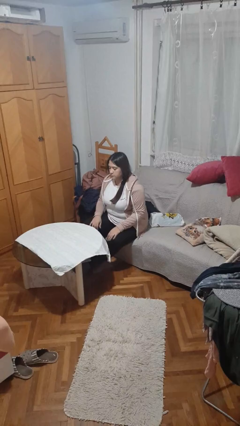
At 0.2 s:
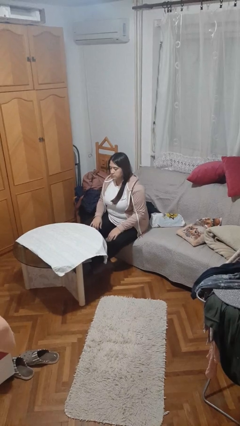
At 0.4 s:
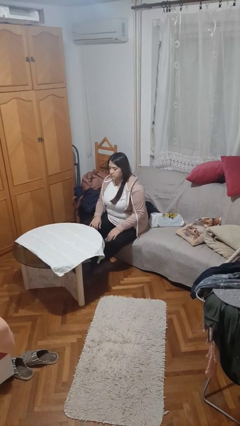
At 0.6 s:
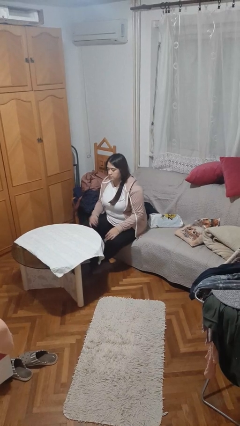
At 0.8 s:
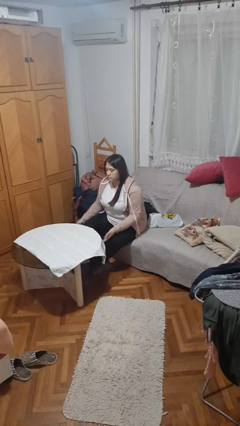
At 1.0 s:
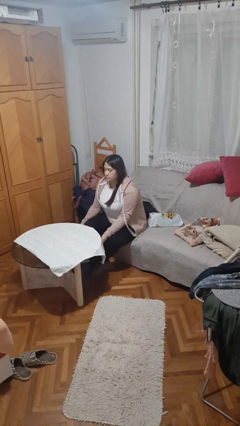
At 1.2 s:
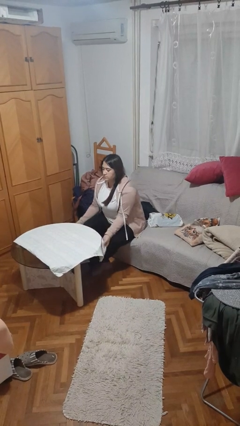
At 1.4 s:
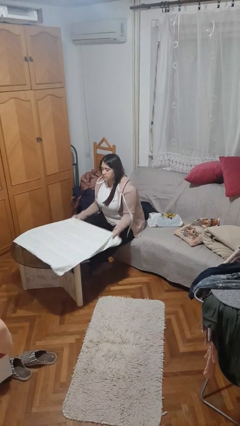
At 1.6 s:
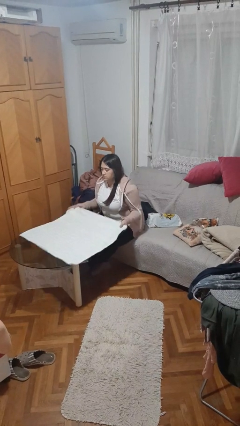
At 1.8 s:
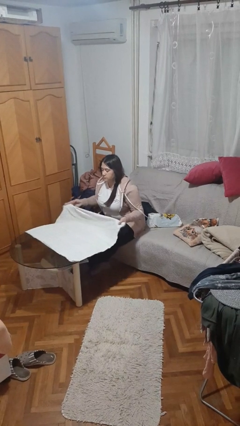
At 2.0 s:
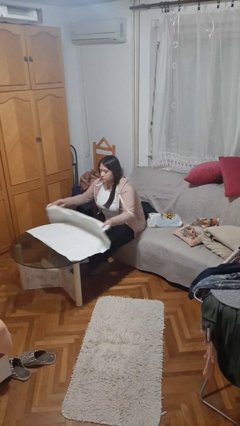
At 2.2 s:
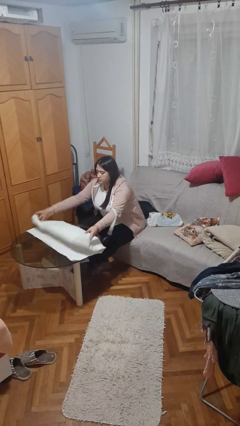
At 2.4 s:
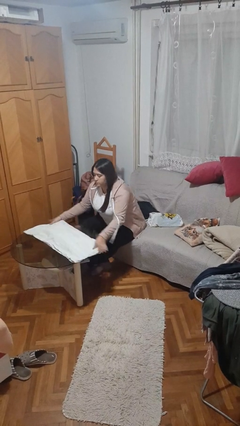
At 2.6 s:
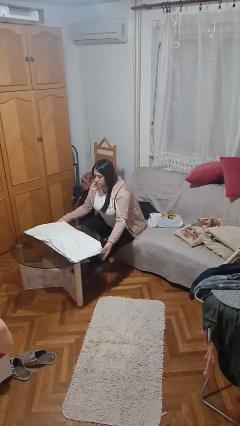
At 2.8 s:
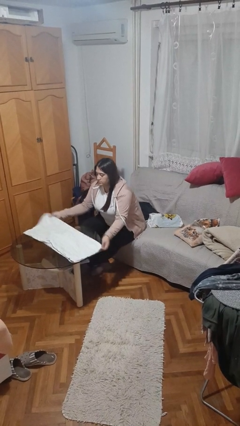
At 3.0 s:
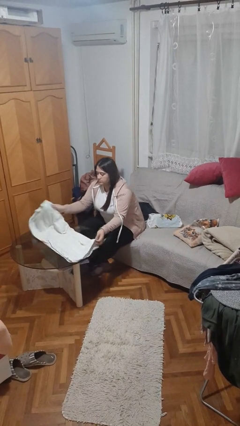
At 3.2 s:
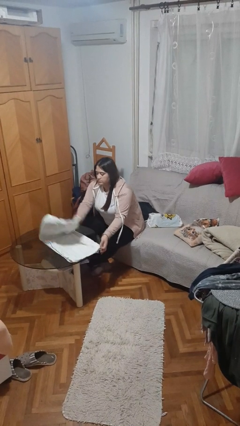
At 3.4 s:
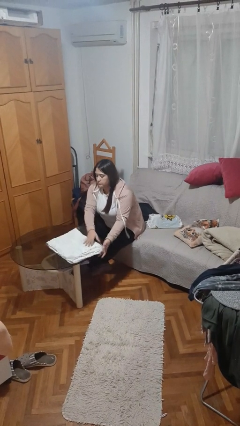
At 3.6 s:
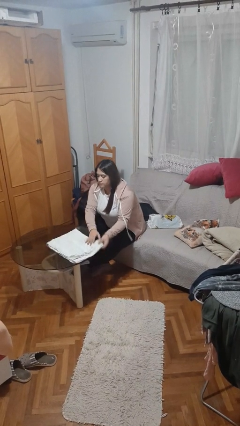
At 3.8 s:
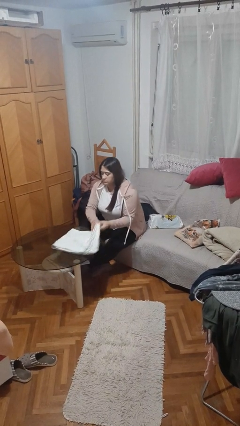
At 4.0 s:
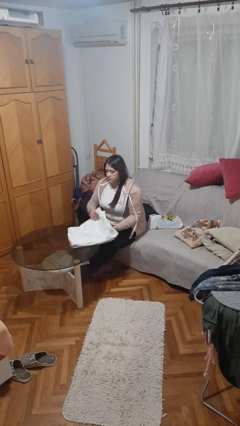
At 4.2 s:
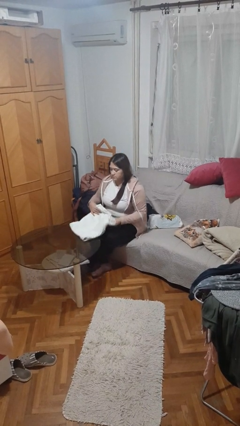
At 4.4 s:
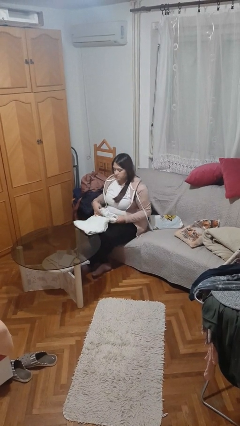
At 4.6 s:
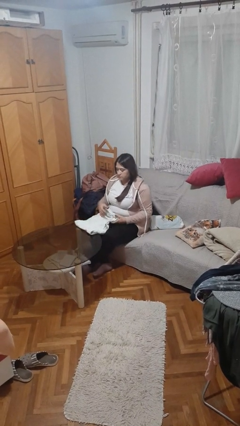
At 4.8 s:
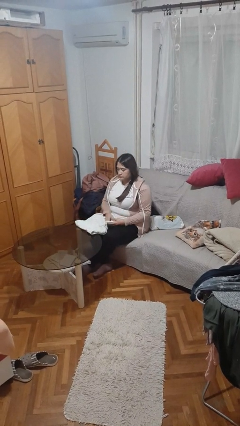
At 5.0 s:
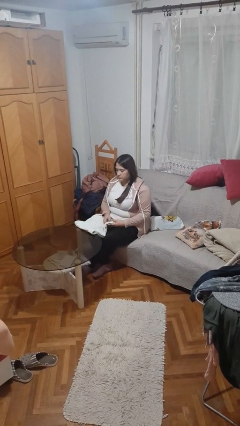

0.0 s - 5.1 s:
person folds tablecloth

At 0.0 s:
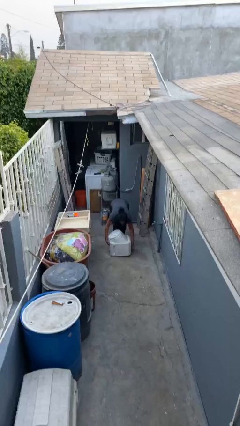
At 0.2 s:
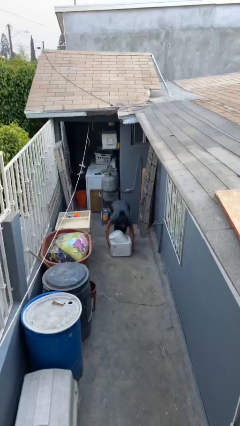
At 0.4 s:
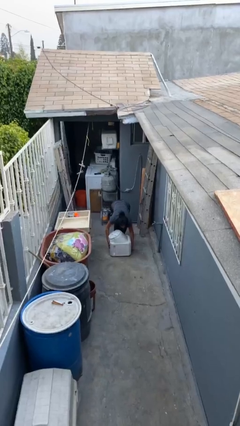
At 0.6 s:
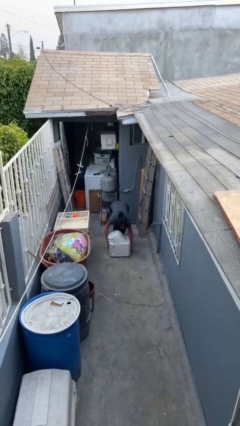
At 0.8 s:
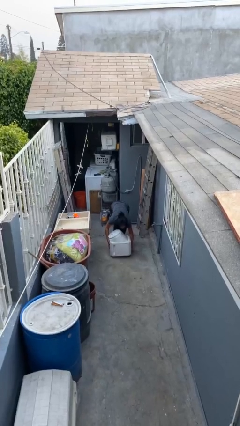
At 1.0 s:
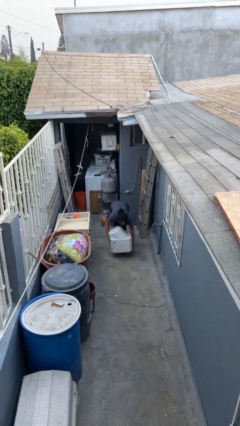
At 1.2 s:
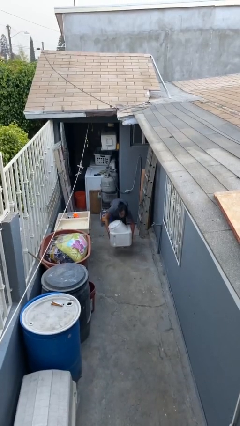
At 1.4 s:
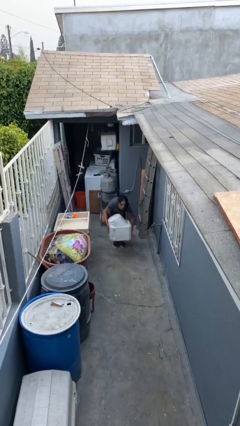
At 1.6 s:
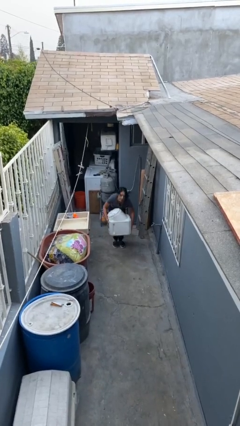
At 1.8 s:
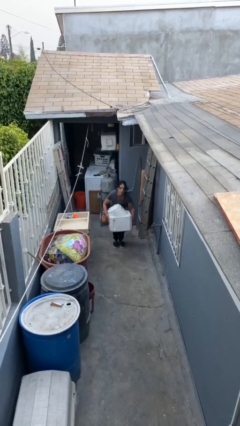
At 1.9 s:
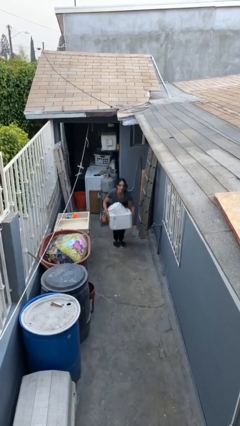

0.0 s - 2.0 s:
person picks up object from floor

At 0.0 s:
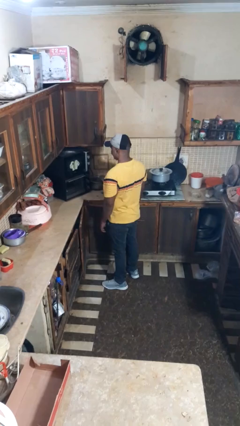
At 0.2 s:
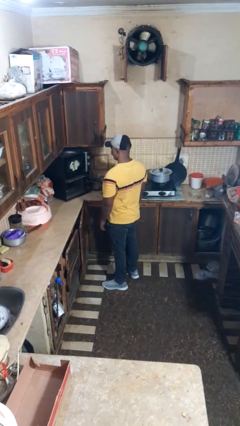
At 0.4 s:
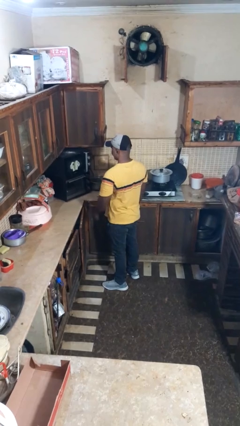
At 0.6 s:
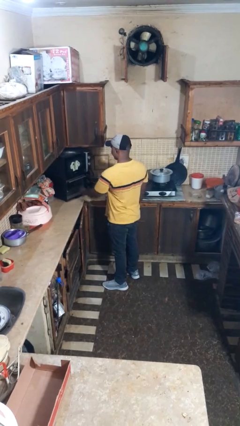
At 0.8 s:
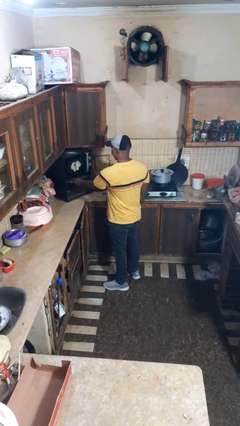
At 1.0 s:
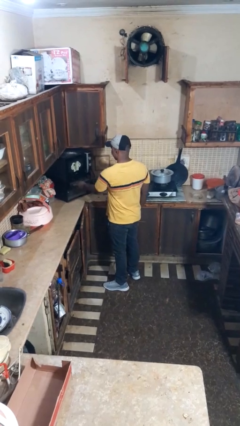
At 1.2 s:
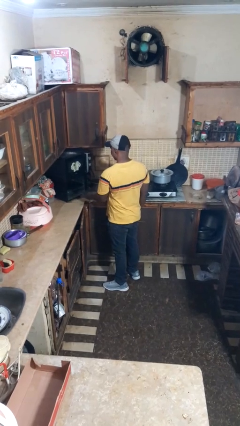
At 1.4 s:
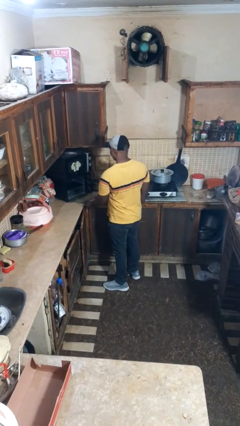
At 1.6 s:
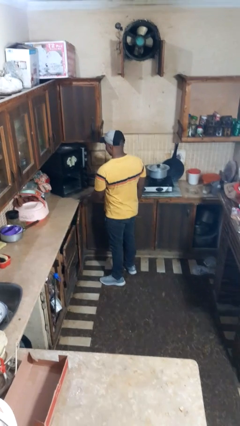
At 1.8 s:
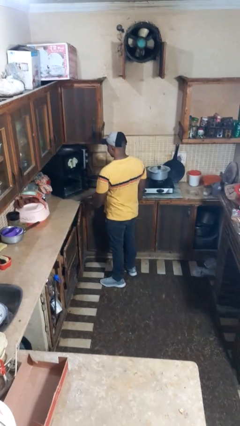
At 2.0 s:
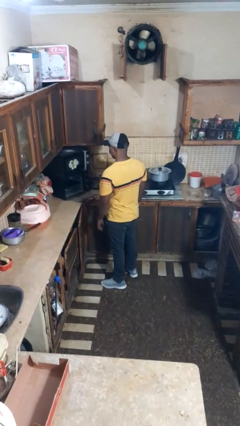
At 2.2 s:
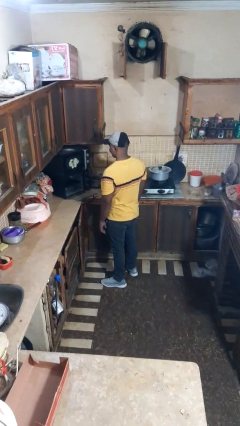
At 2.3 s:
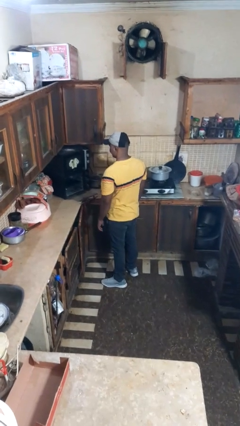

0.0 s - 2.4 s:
person opens oven door

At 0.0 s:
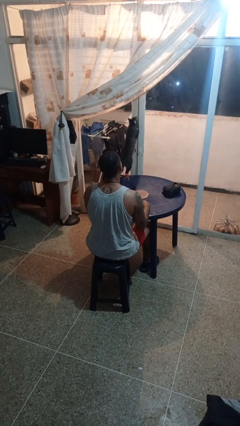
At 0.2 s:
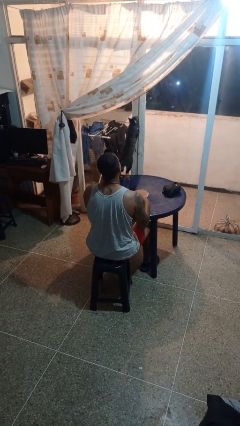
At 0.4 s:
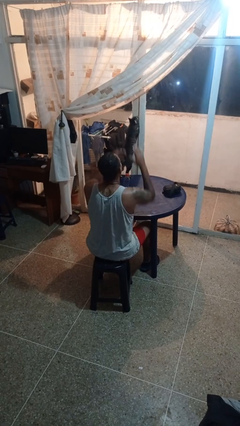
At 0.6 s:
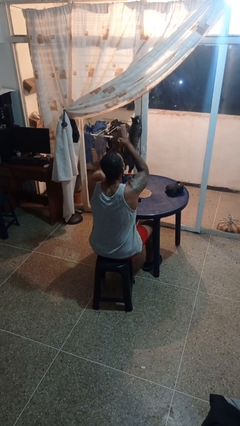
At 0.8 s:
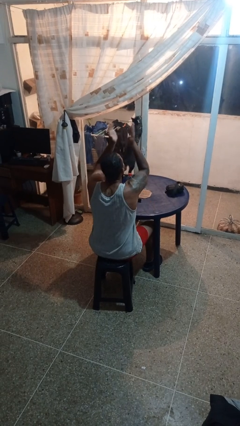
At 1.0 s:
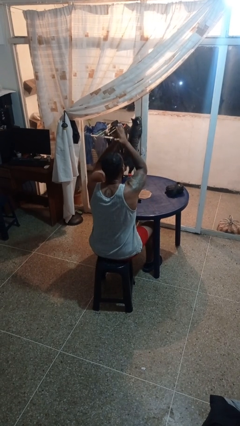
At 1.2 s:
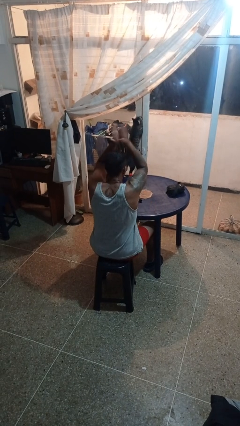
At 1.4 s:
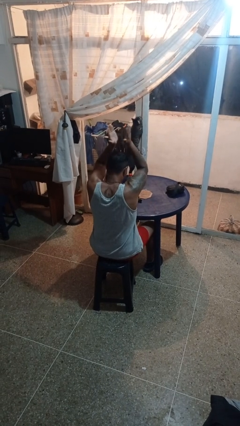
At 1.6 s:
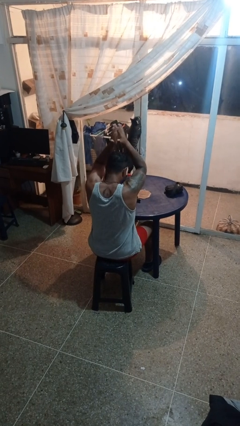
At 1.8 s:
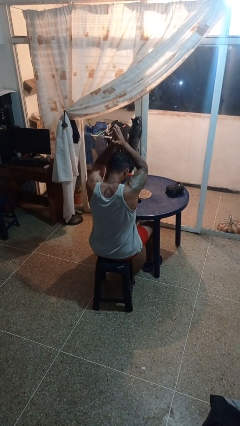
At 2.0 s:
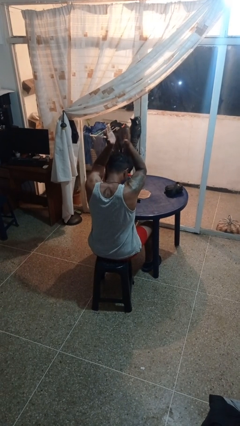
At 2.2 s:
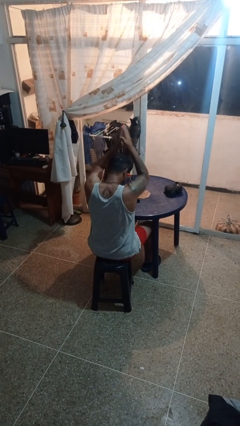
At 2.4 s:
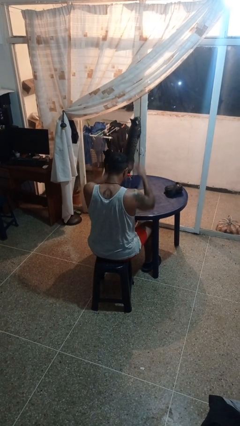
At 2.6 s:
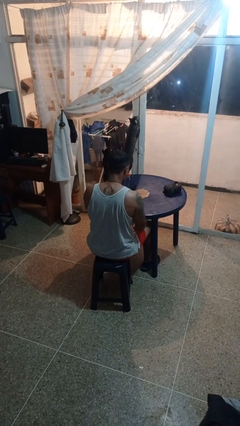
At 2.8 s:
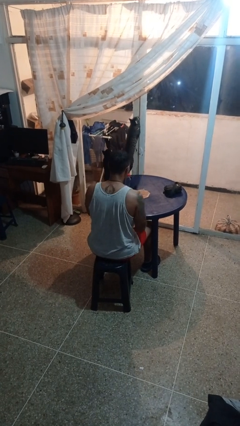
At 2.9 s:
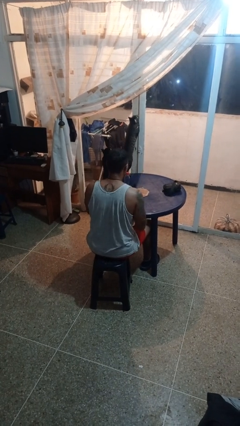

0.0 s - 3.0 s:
person claps hands

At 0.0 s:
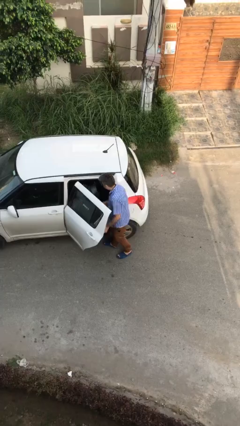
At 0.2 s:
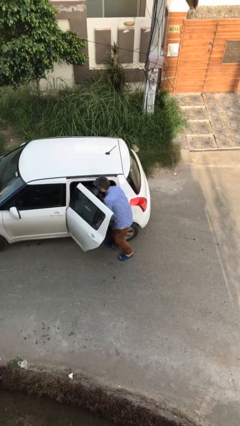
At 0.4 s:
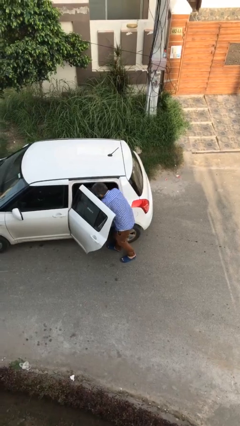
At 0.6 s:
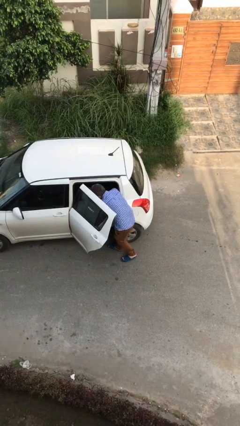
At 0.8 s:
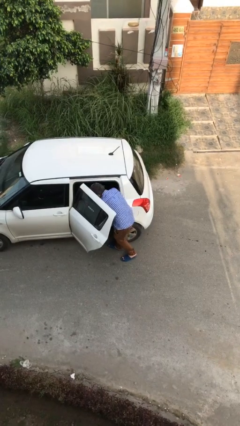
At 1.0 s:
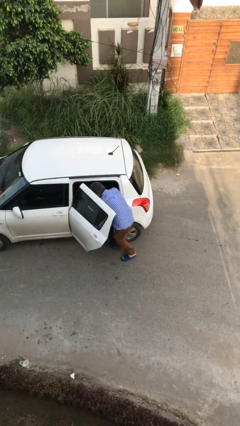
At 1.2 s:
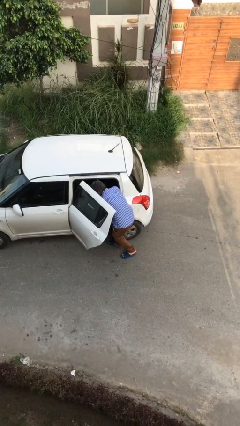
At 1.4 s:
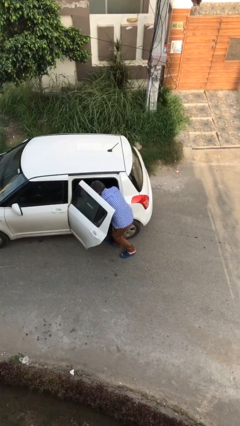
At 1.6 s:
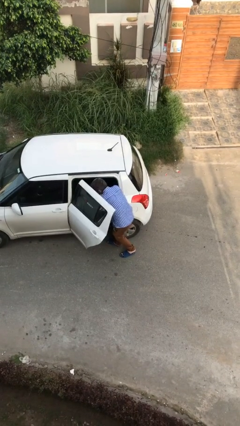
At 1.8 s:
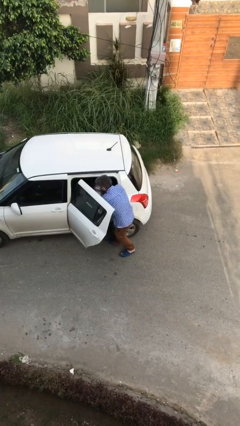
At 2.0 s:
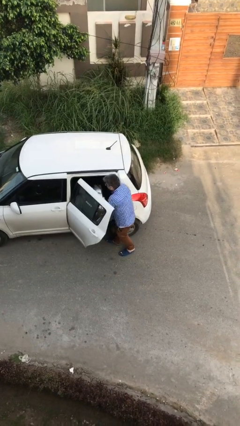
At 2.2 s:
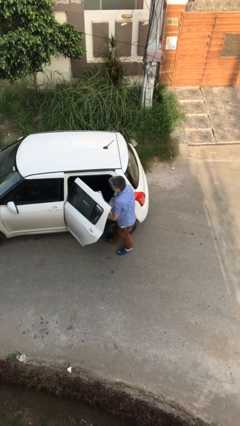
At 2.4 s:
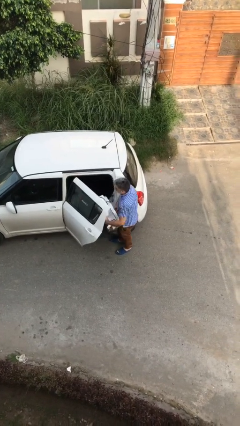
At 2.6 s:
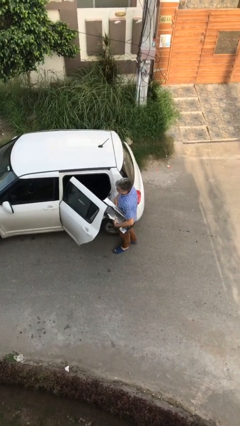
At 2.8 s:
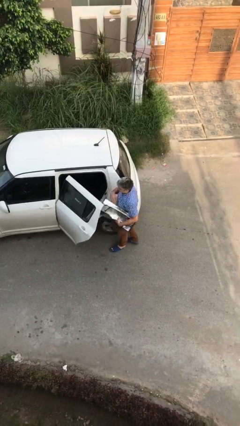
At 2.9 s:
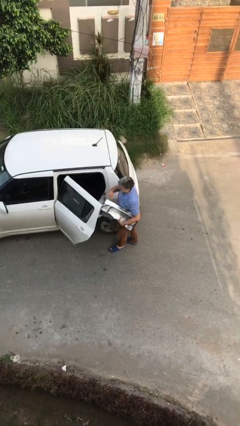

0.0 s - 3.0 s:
person unloads car

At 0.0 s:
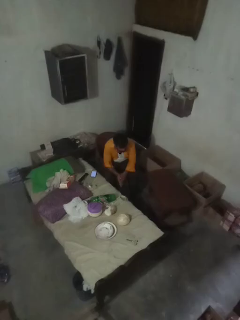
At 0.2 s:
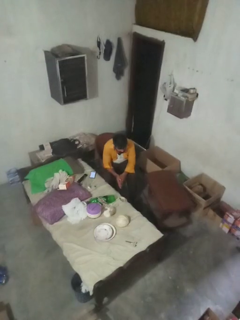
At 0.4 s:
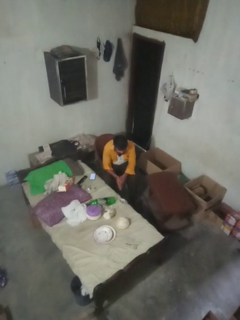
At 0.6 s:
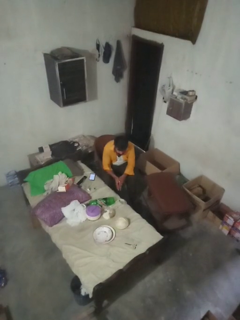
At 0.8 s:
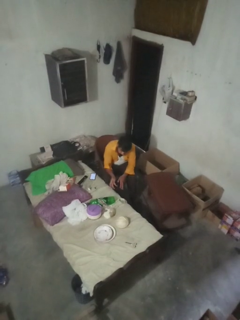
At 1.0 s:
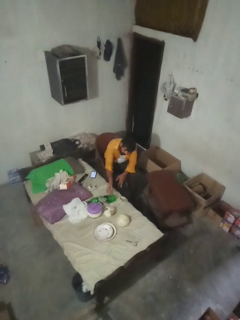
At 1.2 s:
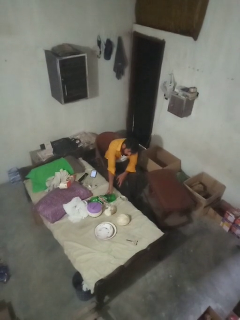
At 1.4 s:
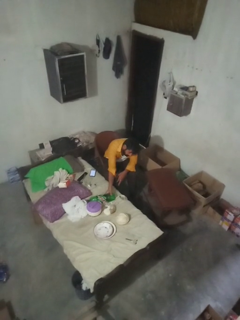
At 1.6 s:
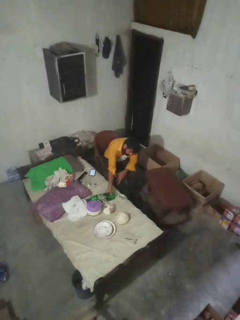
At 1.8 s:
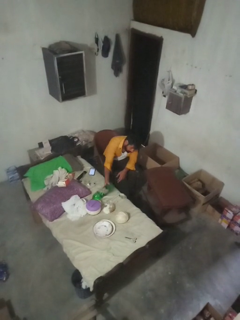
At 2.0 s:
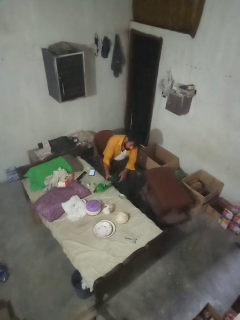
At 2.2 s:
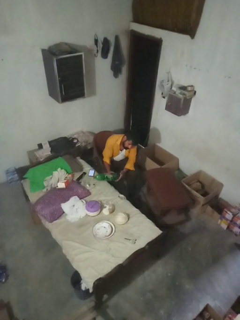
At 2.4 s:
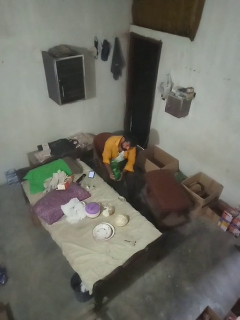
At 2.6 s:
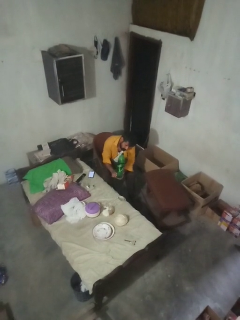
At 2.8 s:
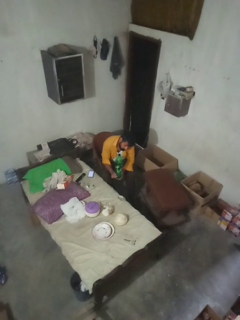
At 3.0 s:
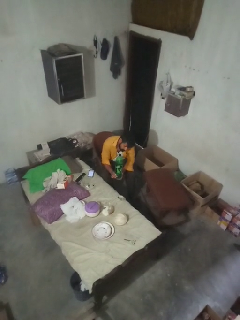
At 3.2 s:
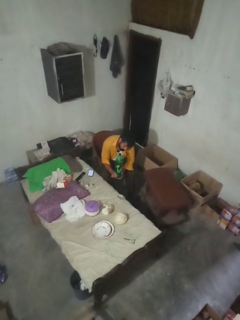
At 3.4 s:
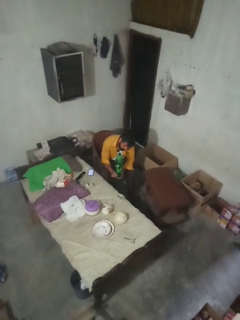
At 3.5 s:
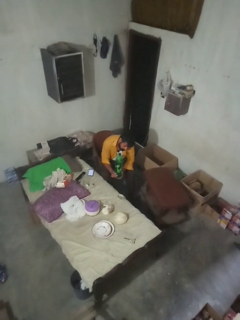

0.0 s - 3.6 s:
person picks up object from bed
